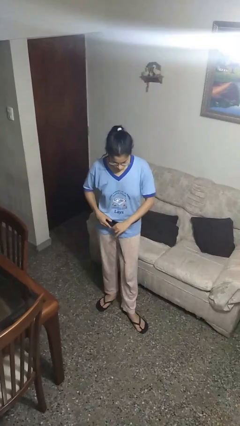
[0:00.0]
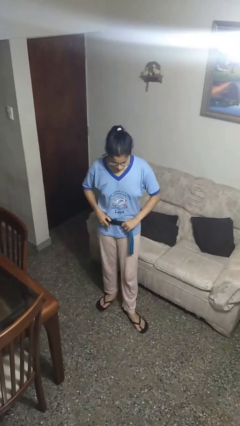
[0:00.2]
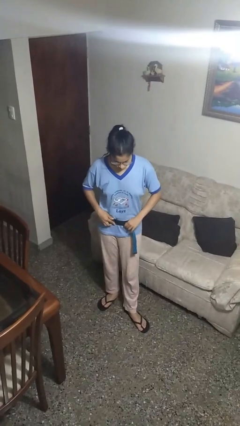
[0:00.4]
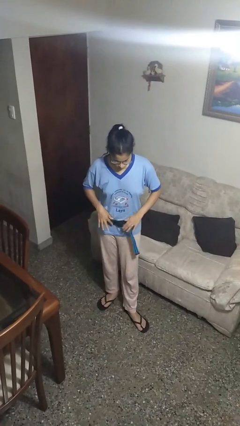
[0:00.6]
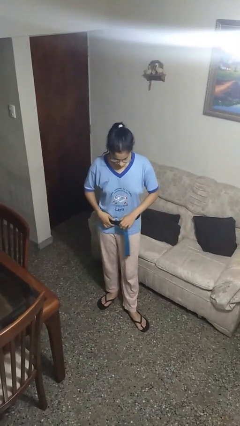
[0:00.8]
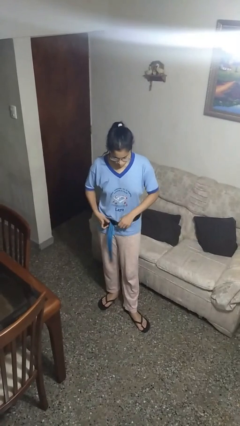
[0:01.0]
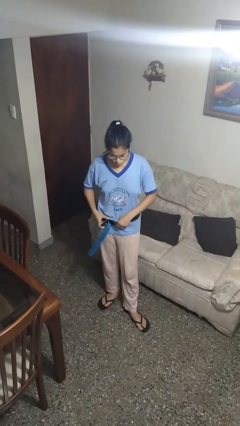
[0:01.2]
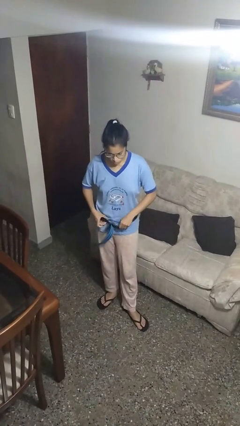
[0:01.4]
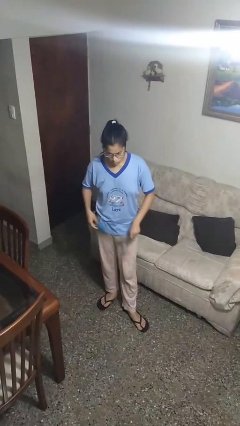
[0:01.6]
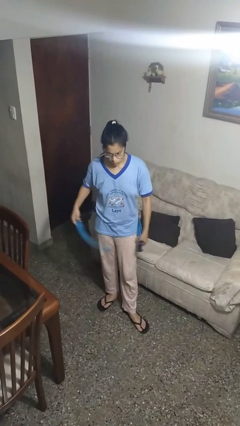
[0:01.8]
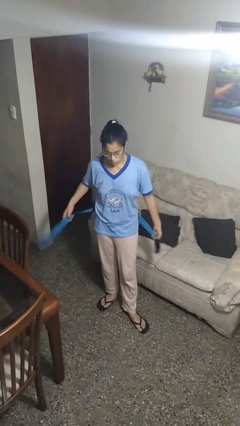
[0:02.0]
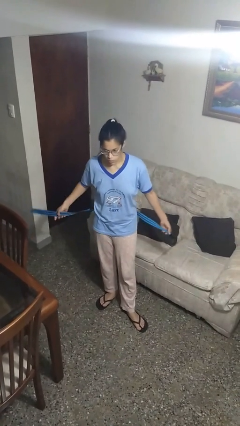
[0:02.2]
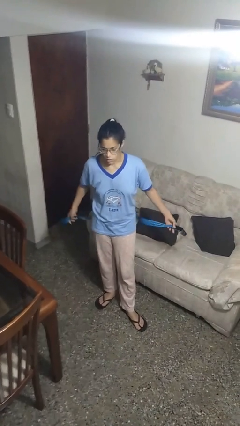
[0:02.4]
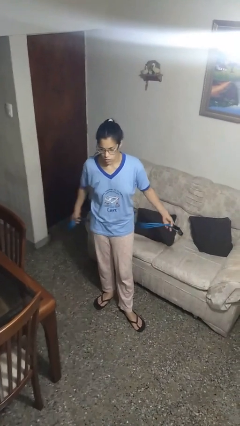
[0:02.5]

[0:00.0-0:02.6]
person takes off belt

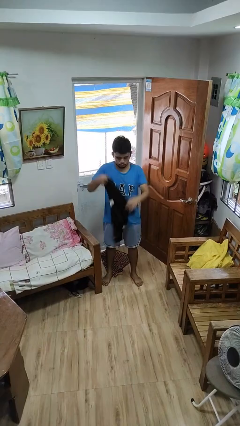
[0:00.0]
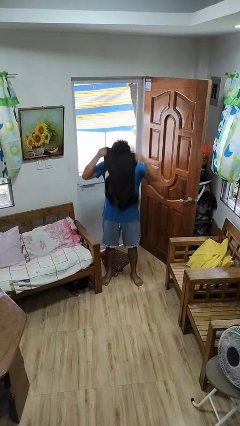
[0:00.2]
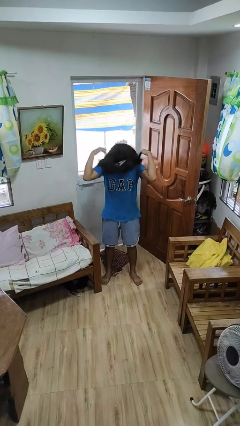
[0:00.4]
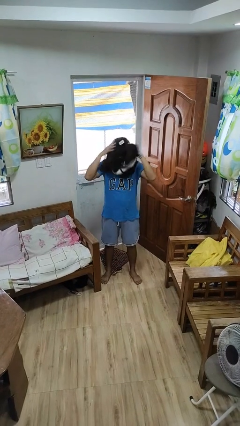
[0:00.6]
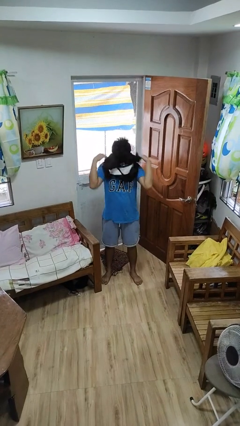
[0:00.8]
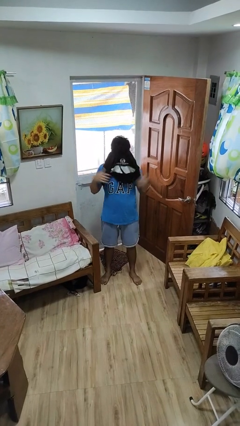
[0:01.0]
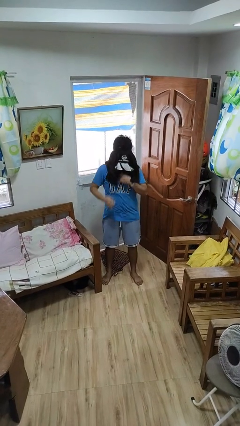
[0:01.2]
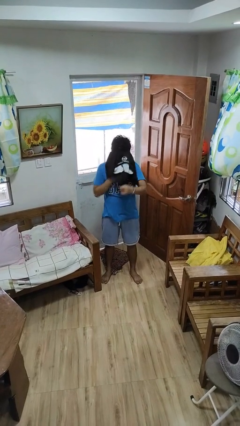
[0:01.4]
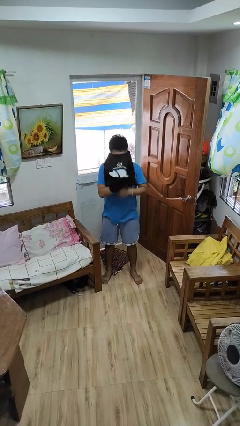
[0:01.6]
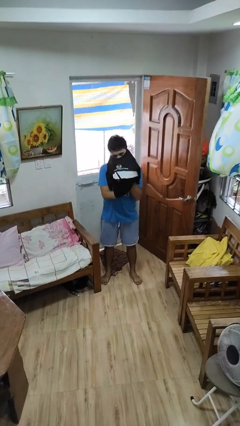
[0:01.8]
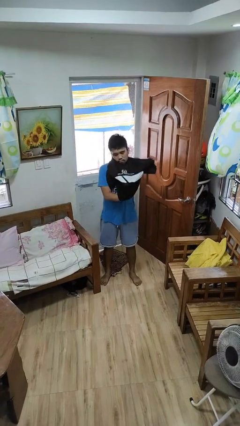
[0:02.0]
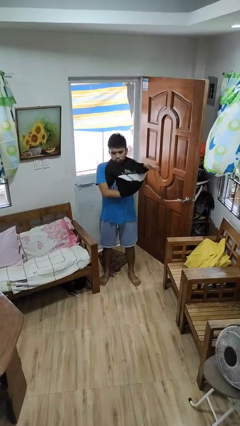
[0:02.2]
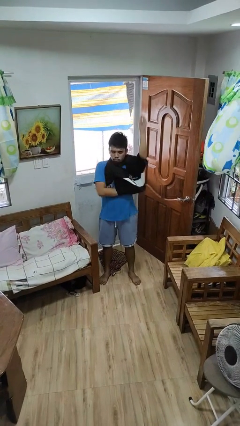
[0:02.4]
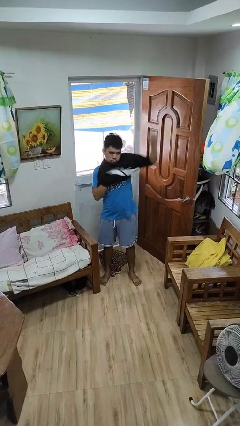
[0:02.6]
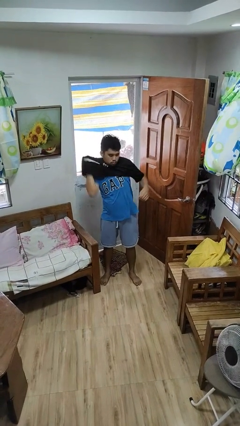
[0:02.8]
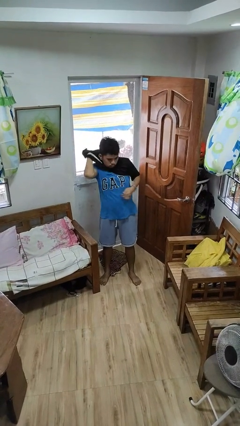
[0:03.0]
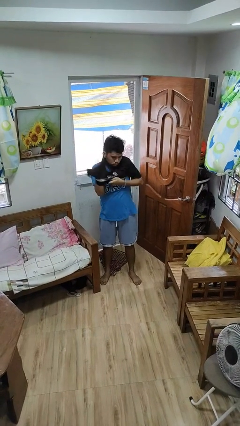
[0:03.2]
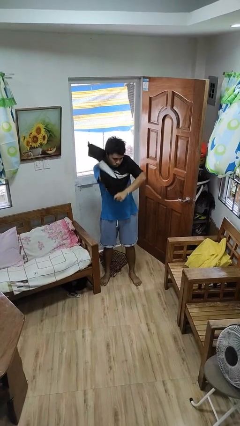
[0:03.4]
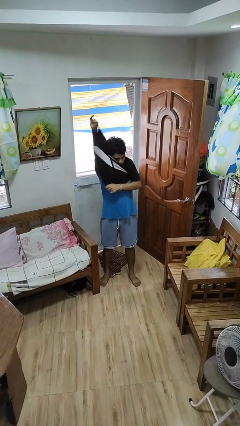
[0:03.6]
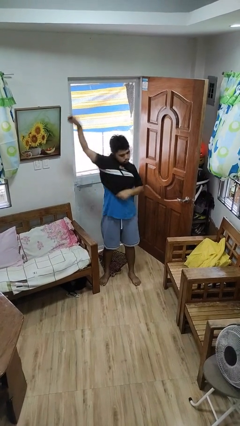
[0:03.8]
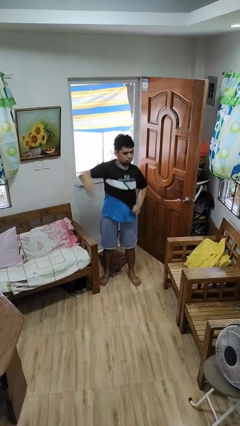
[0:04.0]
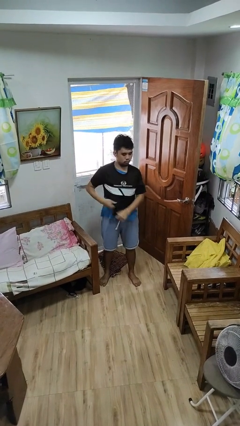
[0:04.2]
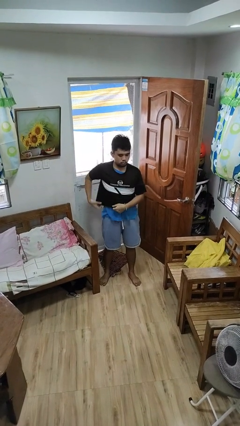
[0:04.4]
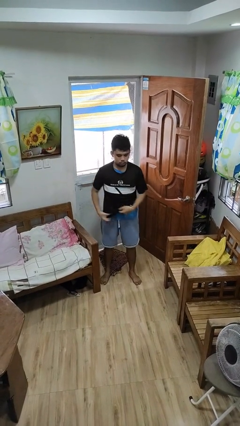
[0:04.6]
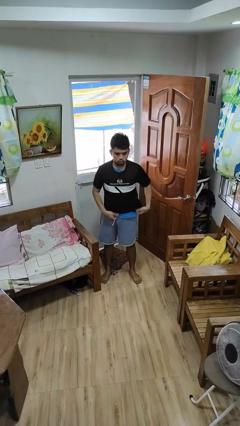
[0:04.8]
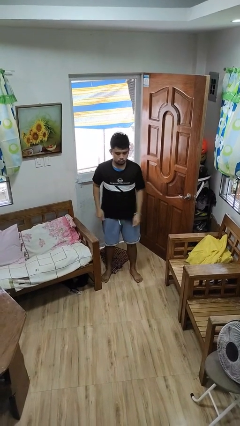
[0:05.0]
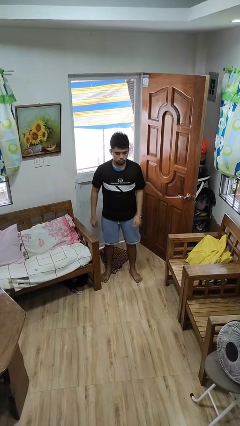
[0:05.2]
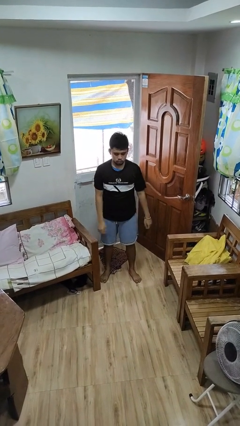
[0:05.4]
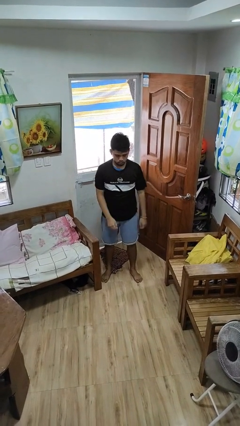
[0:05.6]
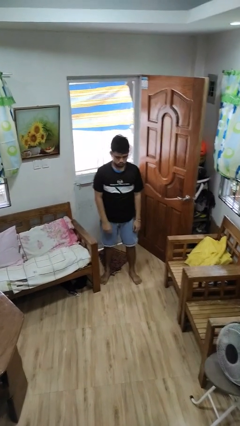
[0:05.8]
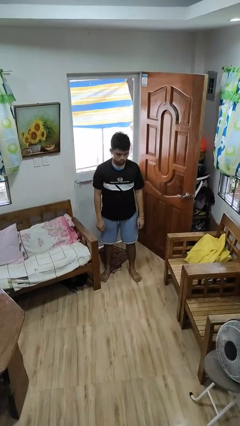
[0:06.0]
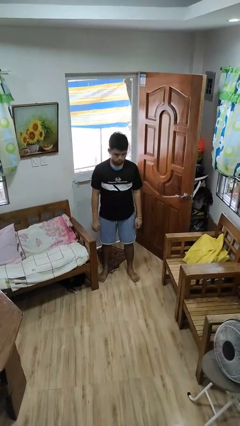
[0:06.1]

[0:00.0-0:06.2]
person puts on shirt

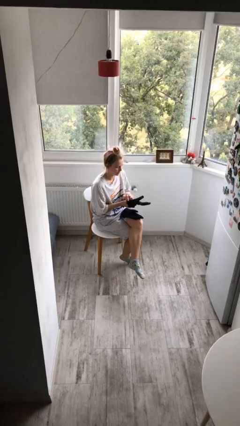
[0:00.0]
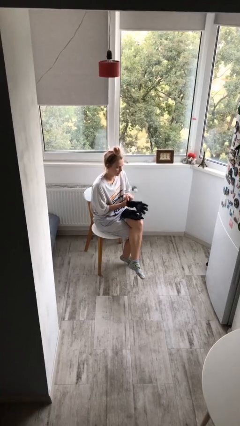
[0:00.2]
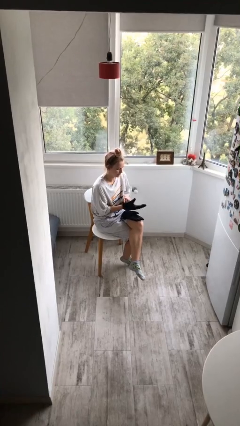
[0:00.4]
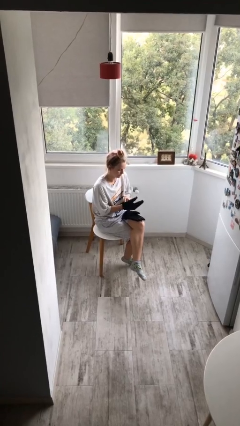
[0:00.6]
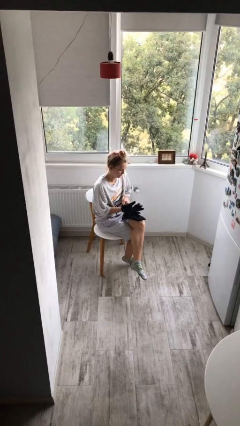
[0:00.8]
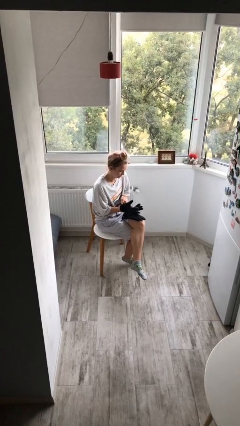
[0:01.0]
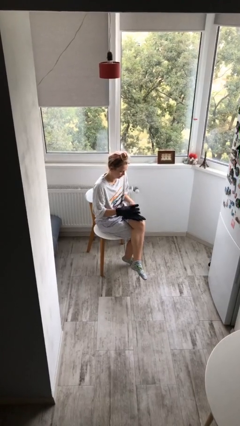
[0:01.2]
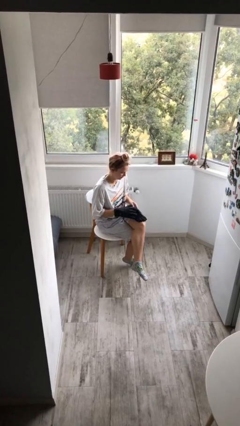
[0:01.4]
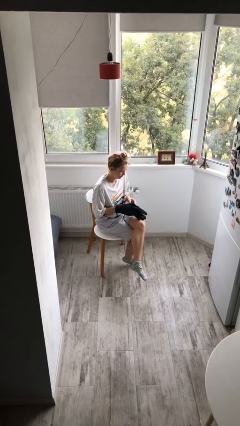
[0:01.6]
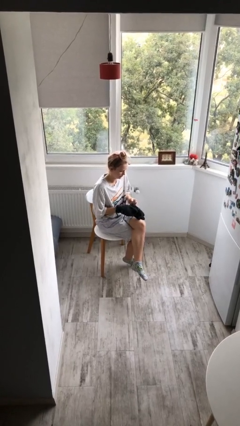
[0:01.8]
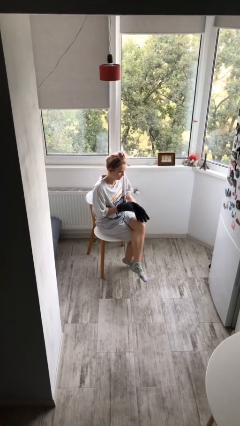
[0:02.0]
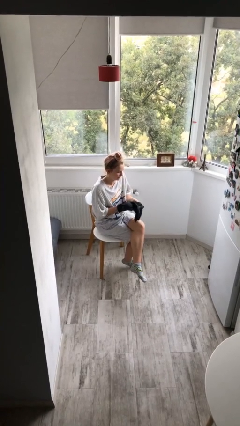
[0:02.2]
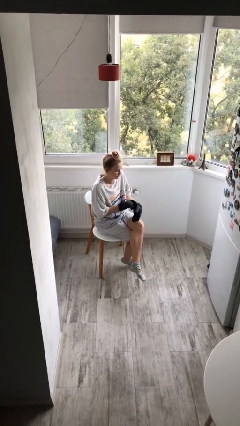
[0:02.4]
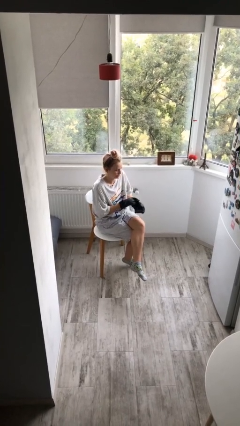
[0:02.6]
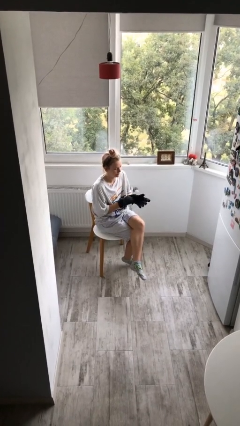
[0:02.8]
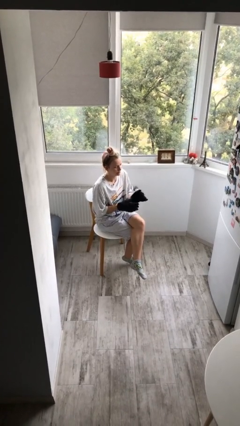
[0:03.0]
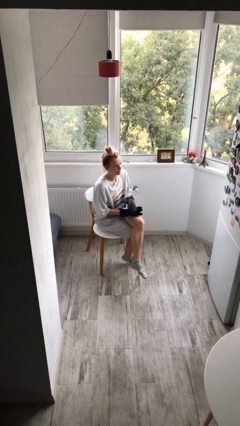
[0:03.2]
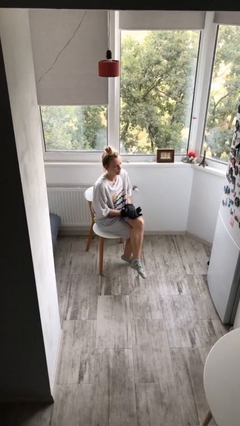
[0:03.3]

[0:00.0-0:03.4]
person puts on gloves

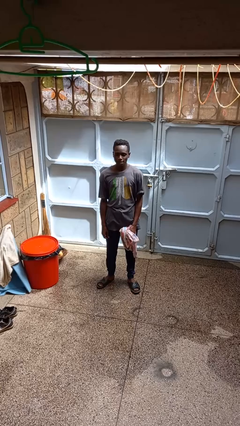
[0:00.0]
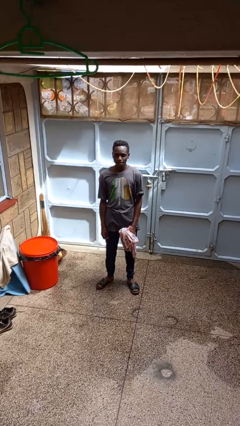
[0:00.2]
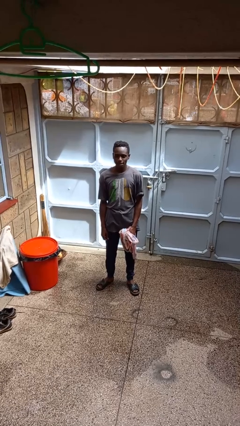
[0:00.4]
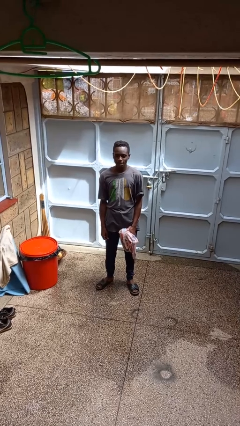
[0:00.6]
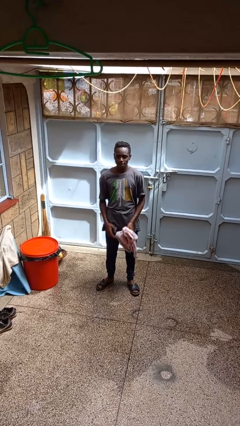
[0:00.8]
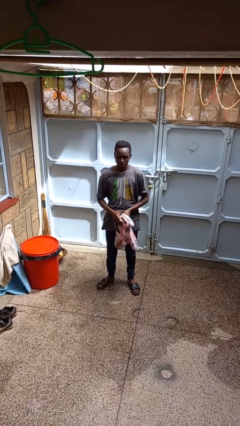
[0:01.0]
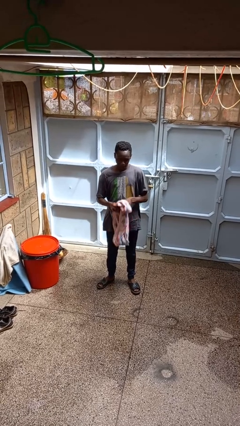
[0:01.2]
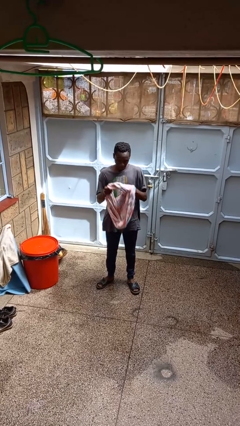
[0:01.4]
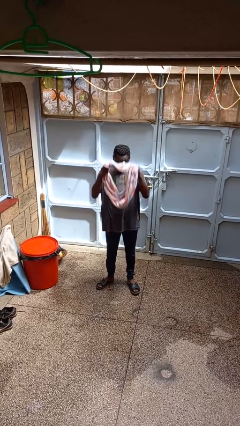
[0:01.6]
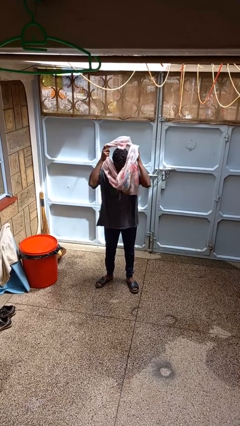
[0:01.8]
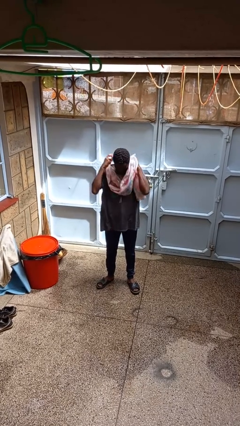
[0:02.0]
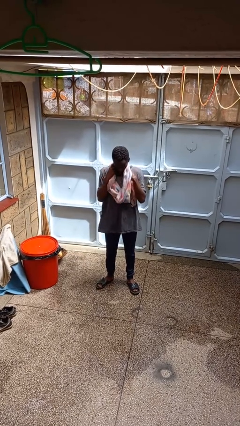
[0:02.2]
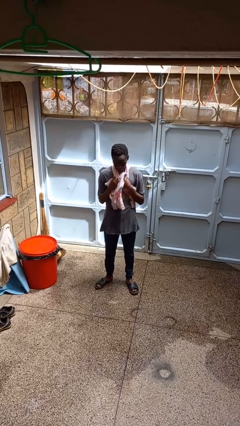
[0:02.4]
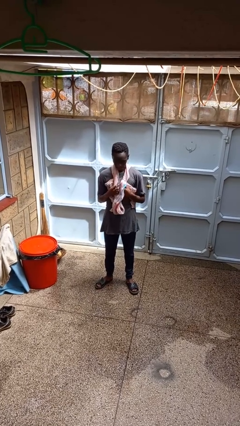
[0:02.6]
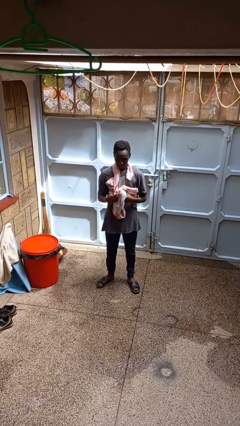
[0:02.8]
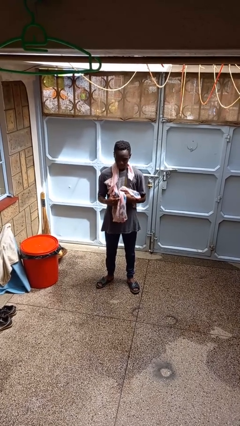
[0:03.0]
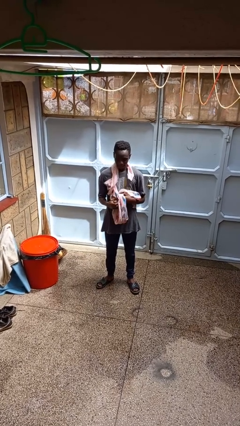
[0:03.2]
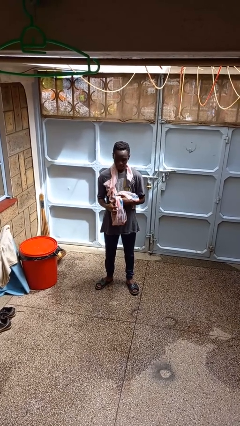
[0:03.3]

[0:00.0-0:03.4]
person puts on scarf

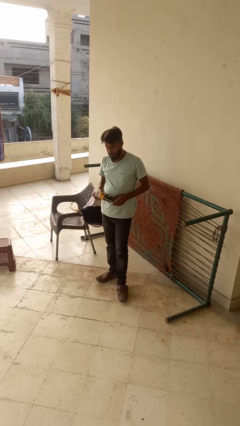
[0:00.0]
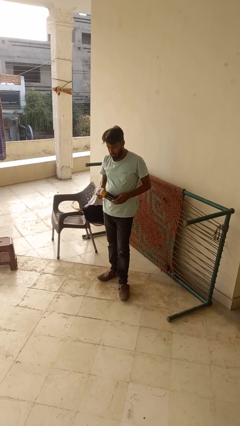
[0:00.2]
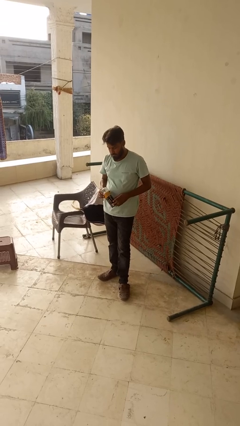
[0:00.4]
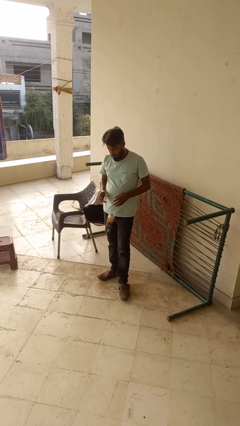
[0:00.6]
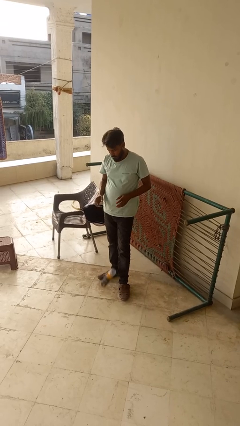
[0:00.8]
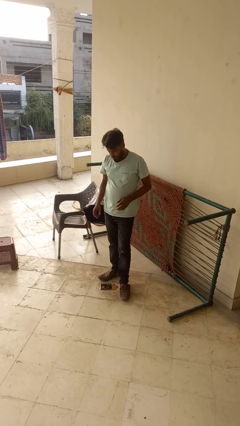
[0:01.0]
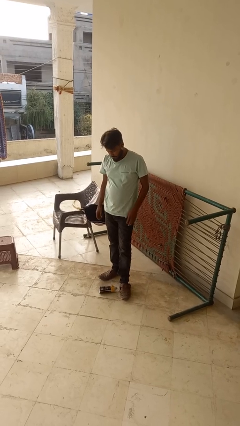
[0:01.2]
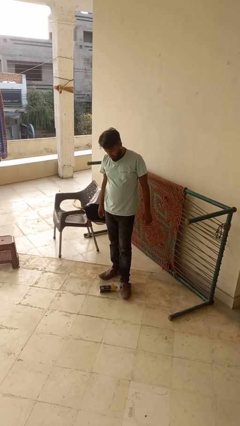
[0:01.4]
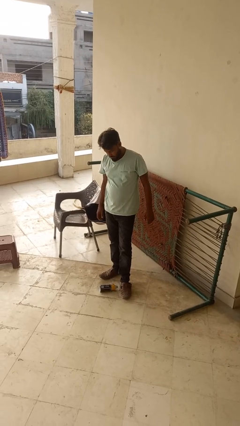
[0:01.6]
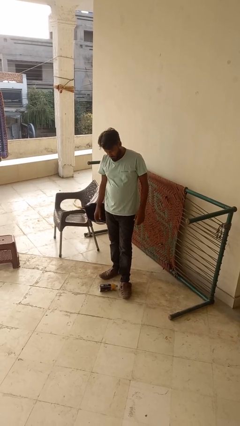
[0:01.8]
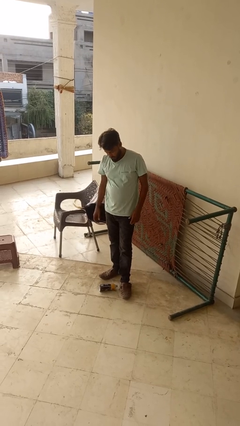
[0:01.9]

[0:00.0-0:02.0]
person drops object

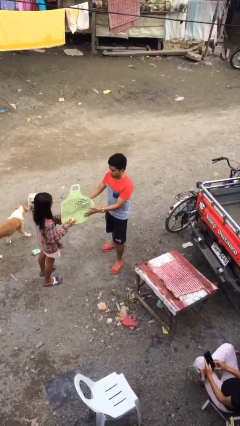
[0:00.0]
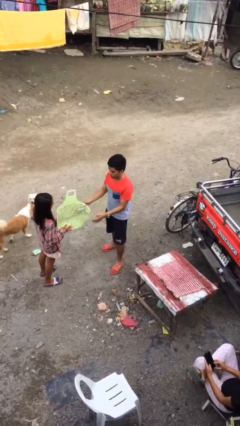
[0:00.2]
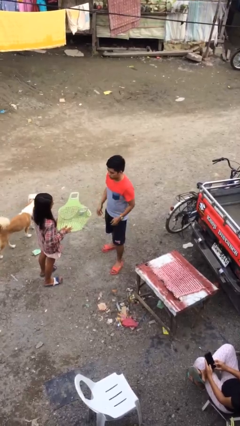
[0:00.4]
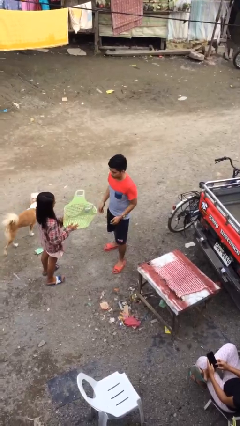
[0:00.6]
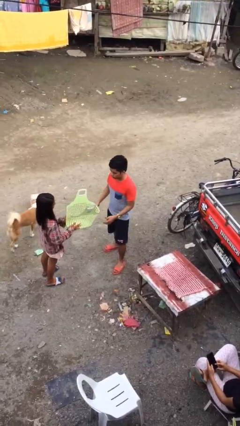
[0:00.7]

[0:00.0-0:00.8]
person transfers object to person
